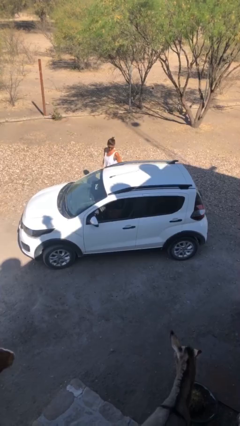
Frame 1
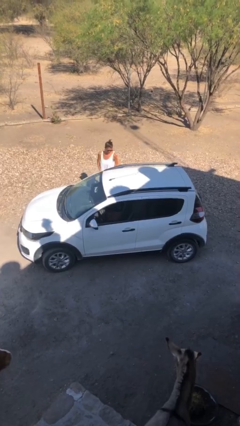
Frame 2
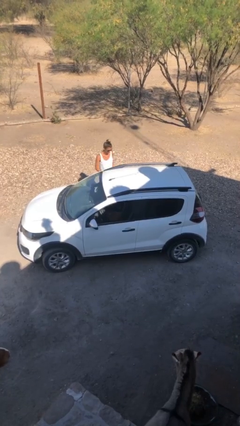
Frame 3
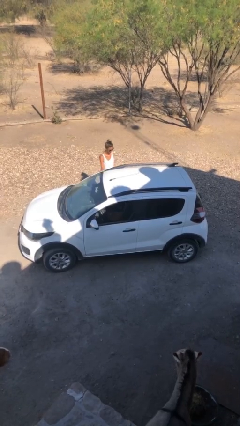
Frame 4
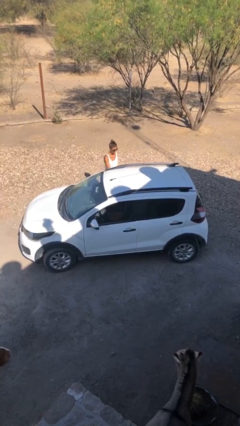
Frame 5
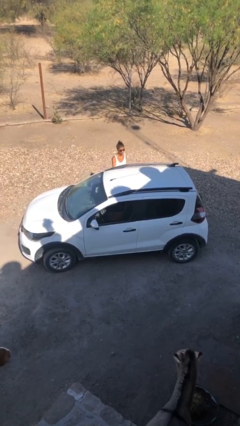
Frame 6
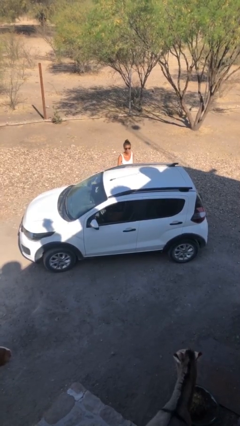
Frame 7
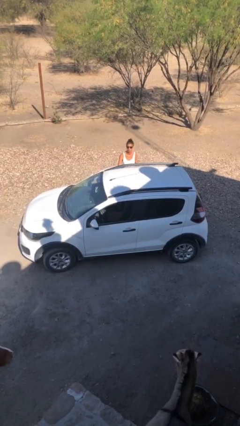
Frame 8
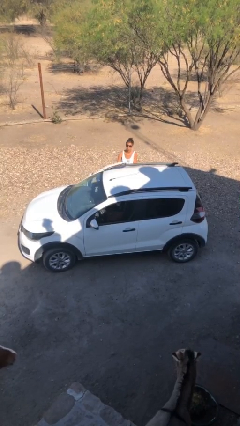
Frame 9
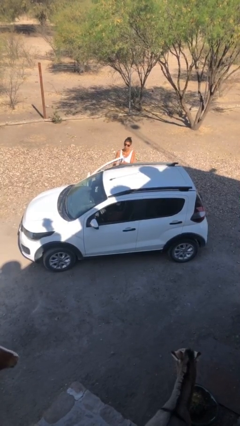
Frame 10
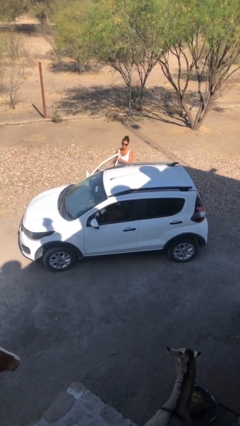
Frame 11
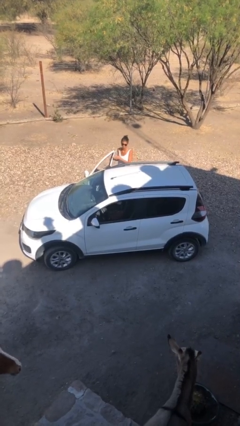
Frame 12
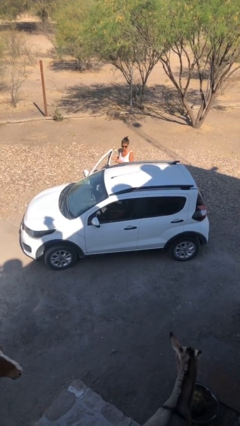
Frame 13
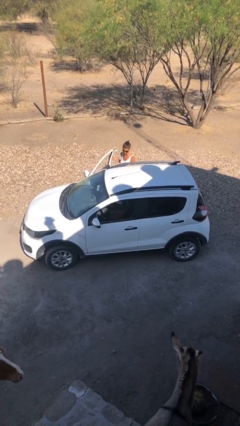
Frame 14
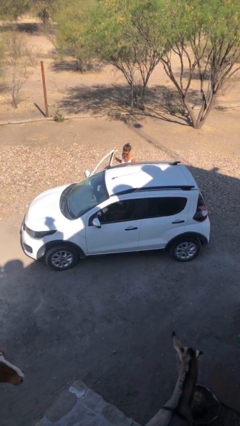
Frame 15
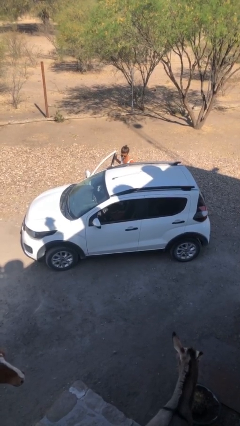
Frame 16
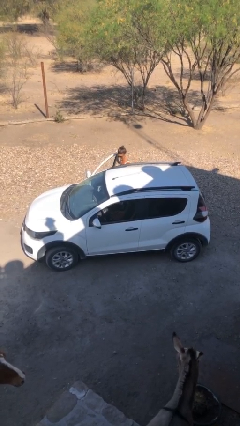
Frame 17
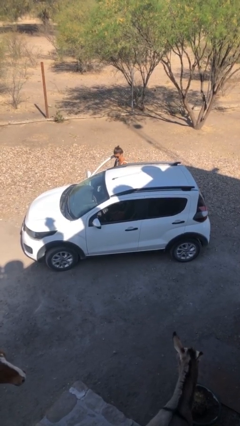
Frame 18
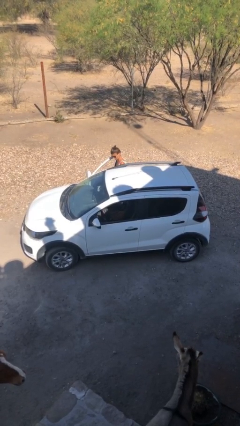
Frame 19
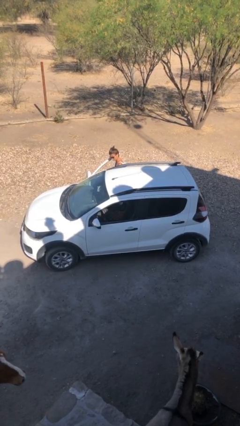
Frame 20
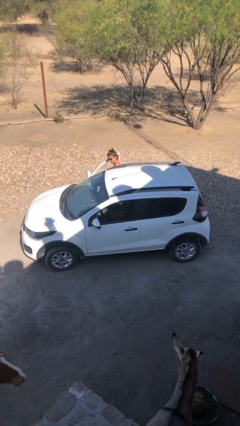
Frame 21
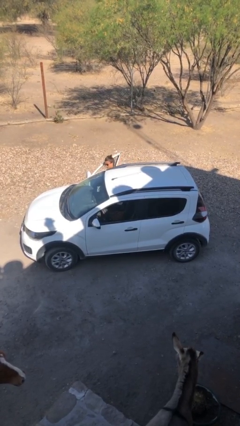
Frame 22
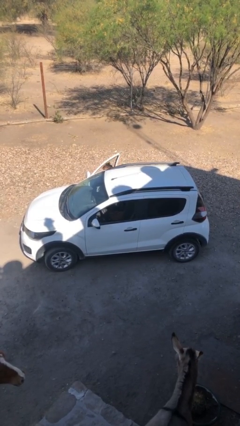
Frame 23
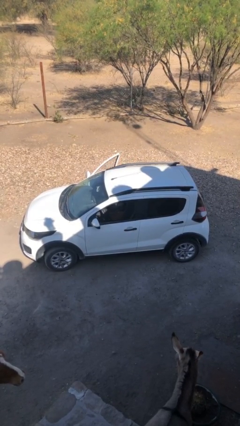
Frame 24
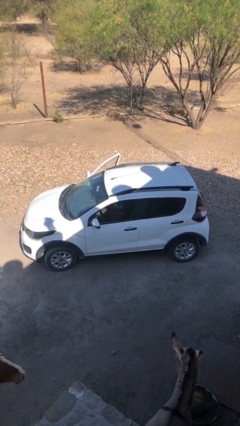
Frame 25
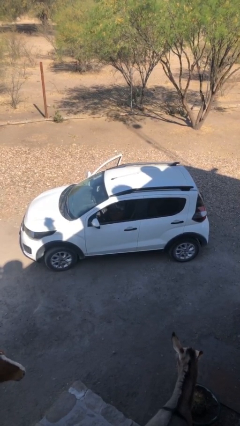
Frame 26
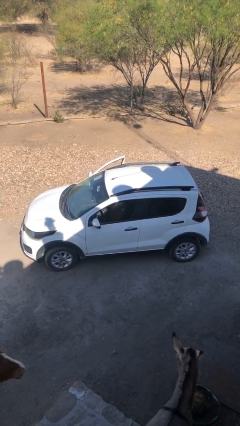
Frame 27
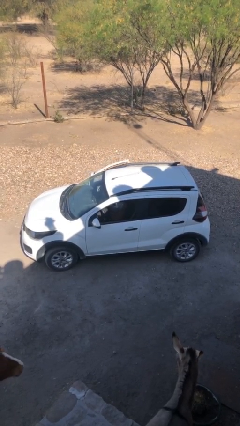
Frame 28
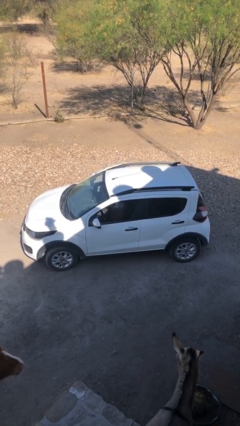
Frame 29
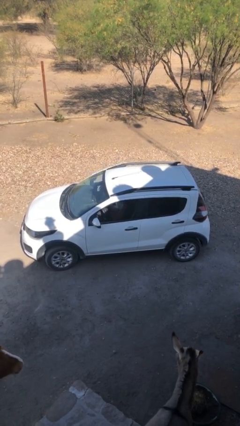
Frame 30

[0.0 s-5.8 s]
car picks up person

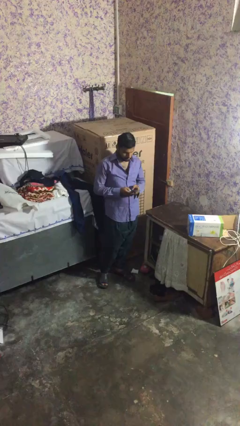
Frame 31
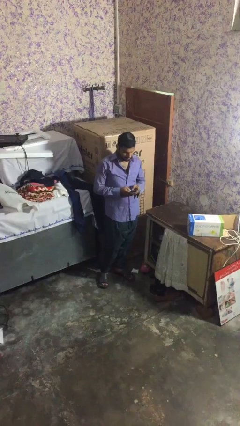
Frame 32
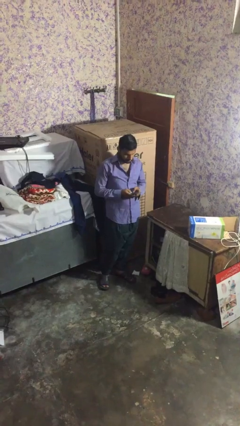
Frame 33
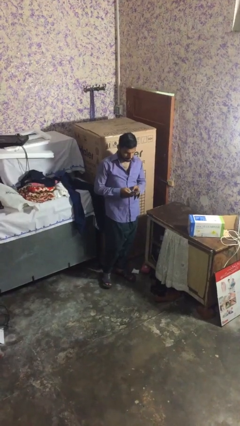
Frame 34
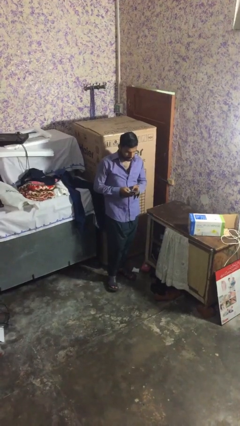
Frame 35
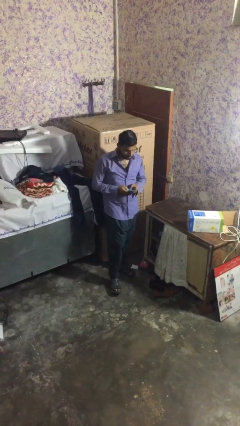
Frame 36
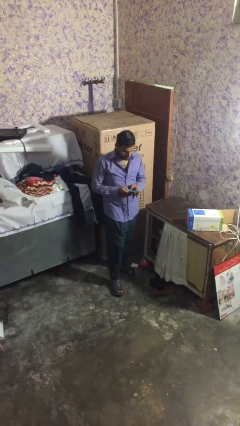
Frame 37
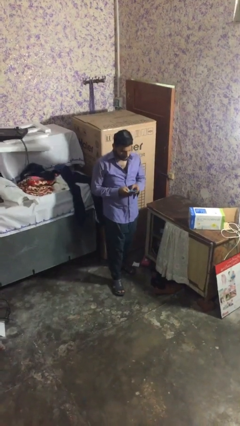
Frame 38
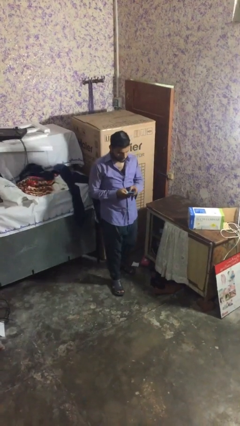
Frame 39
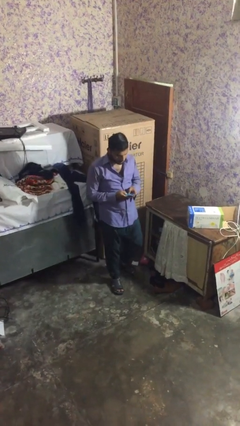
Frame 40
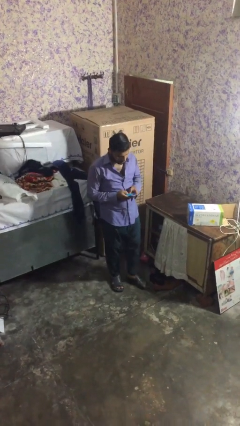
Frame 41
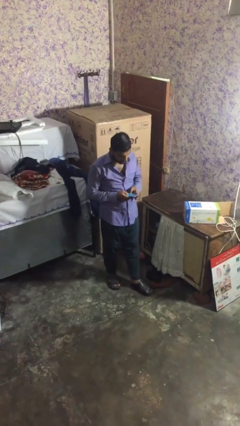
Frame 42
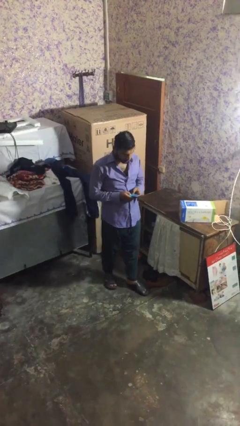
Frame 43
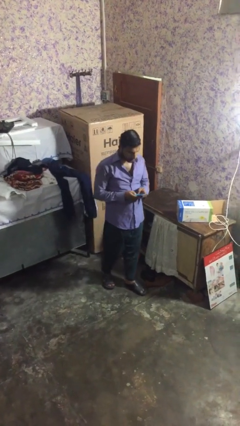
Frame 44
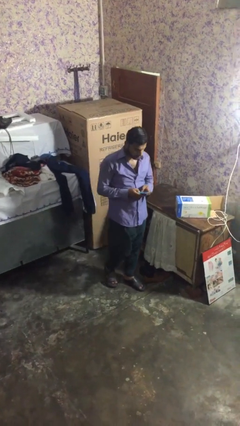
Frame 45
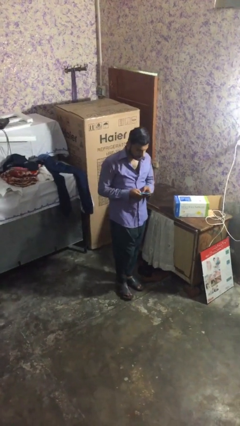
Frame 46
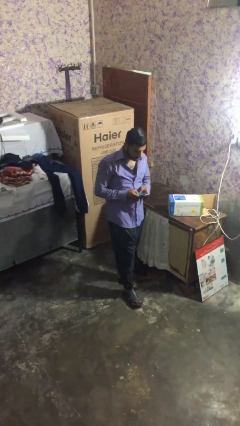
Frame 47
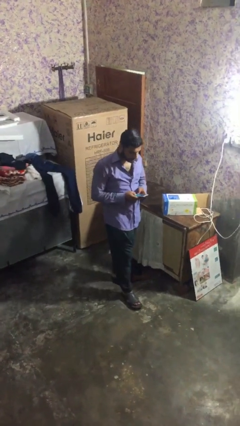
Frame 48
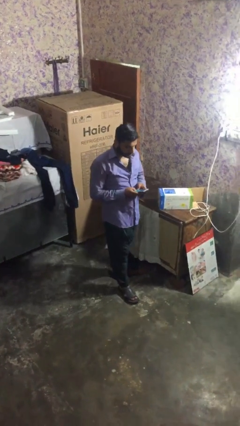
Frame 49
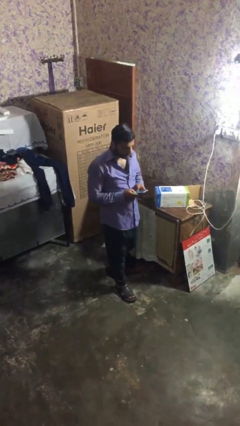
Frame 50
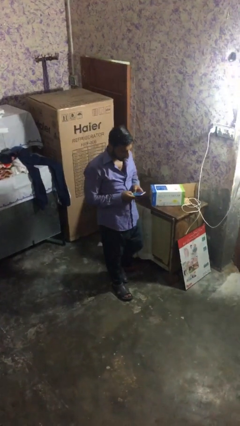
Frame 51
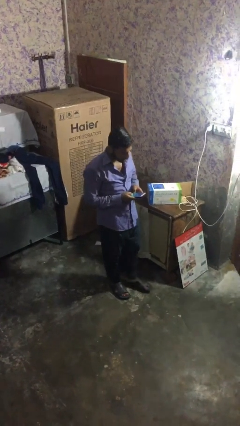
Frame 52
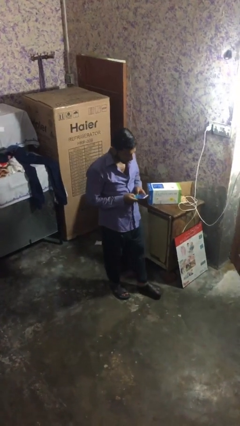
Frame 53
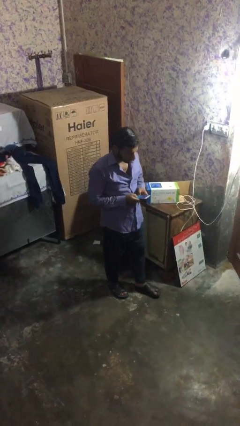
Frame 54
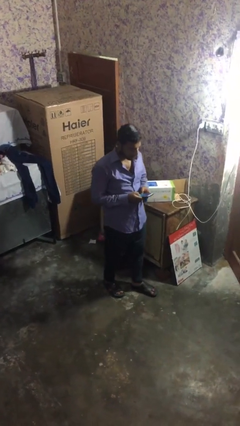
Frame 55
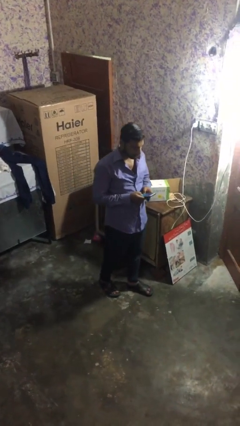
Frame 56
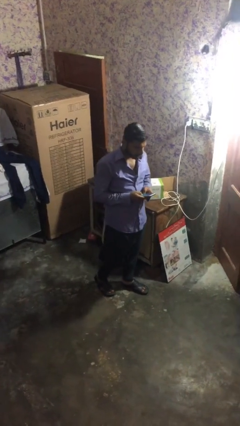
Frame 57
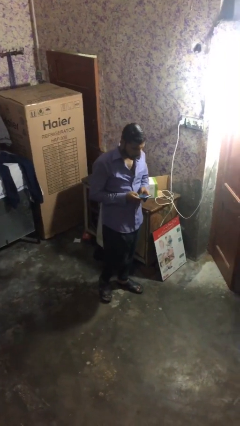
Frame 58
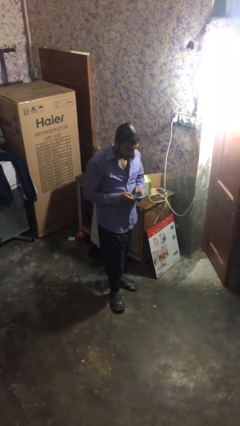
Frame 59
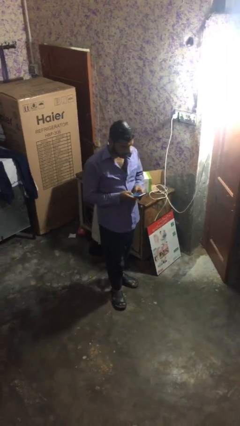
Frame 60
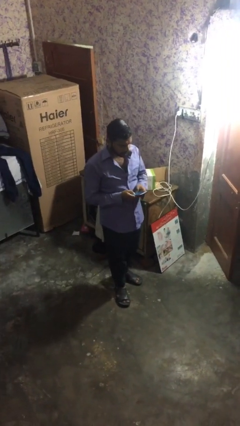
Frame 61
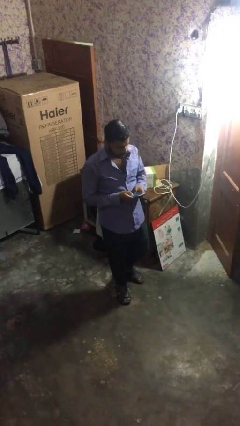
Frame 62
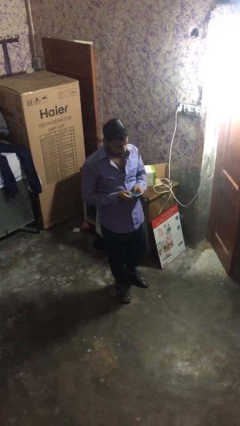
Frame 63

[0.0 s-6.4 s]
person texts on phone

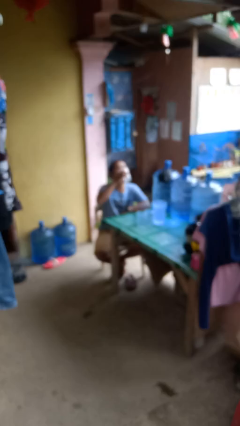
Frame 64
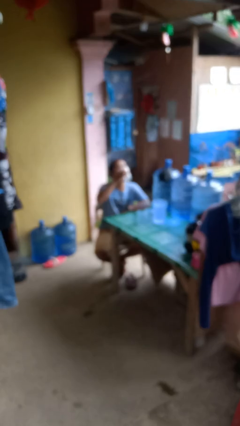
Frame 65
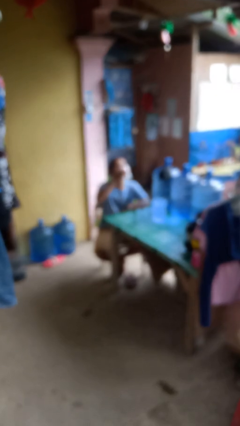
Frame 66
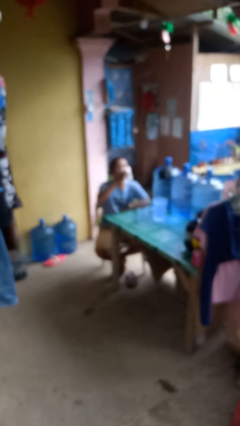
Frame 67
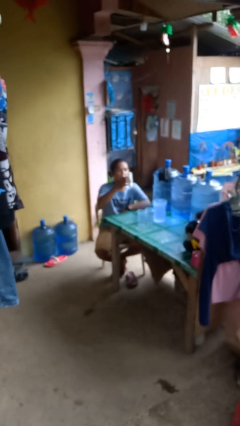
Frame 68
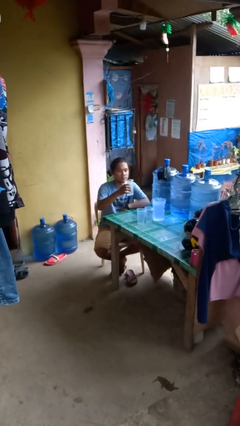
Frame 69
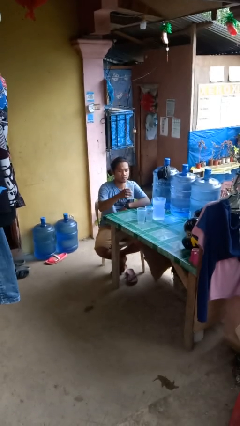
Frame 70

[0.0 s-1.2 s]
person drinks from shotglass

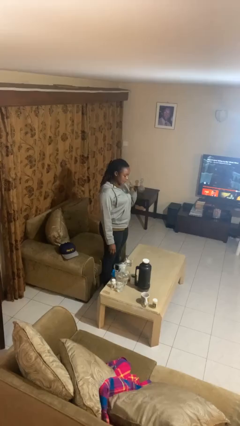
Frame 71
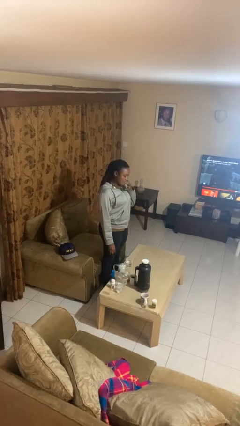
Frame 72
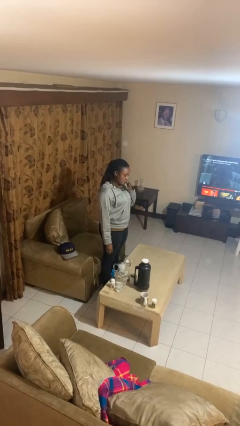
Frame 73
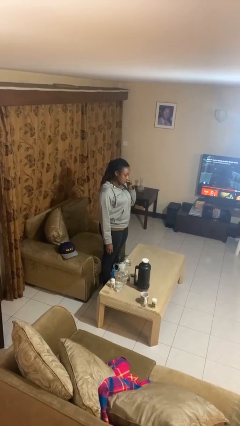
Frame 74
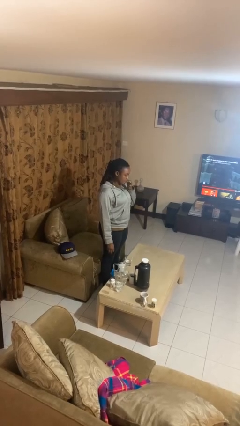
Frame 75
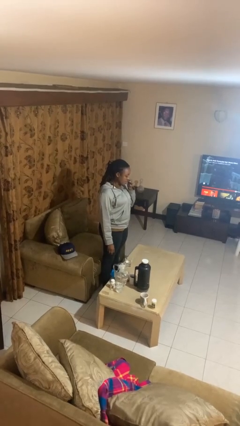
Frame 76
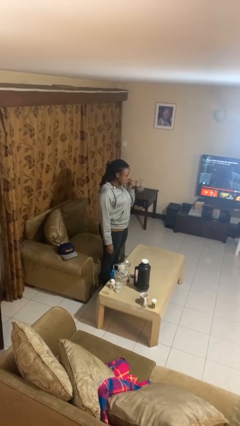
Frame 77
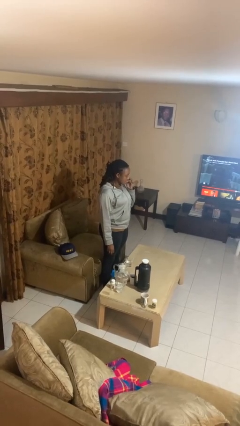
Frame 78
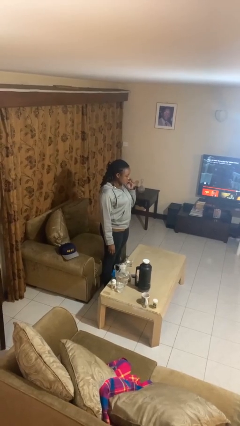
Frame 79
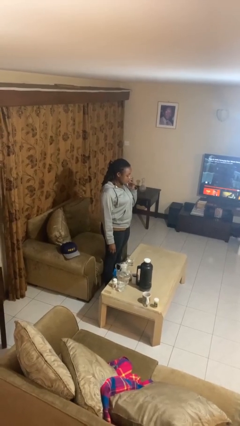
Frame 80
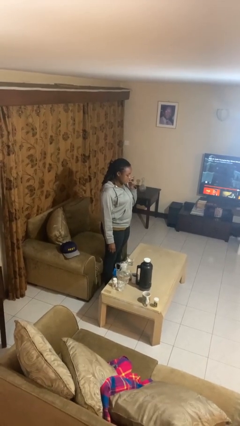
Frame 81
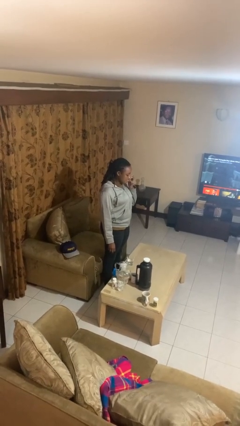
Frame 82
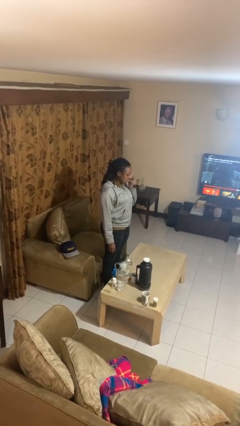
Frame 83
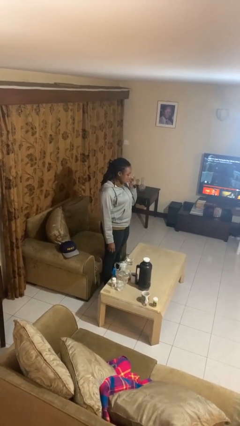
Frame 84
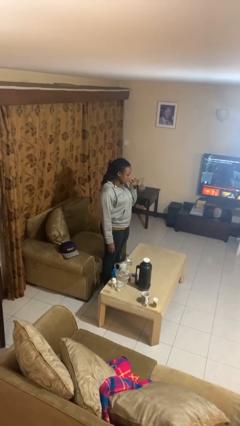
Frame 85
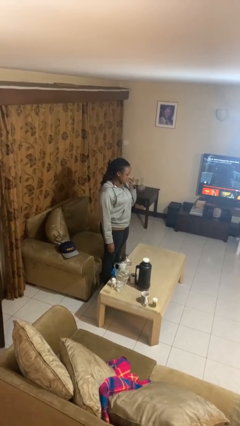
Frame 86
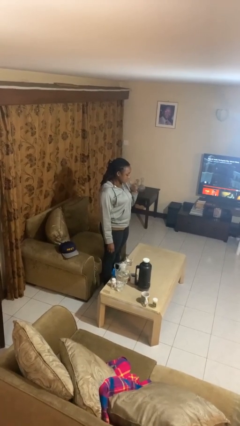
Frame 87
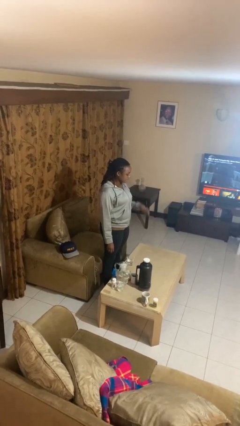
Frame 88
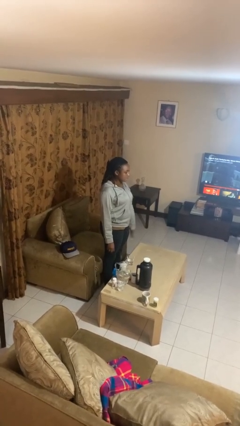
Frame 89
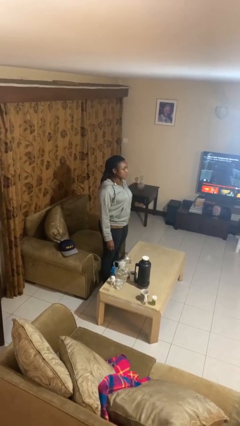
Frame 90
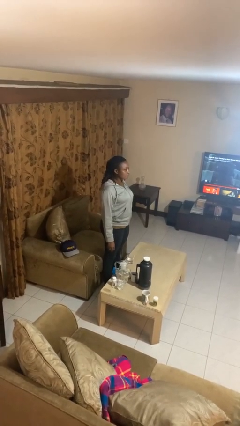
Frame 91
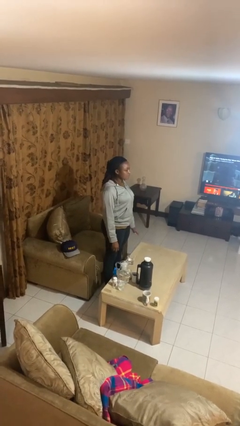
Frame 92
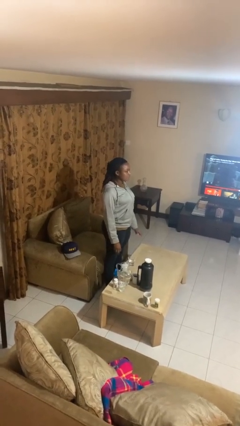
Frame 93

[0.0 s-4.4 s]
person licks fingers

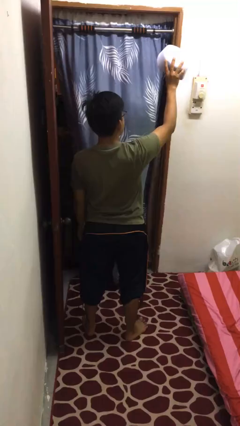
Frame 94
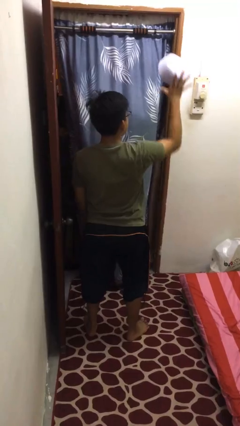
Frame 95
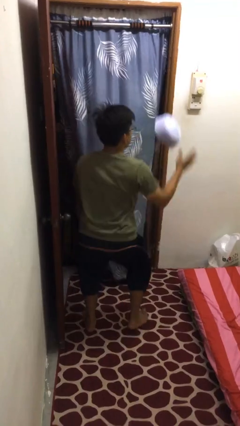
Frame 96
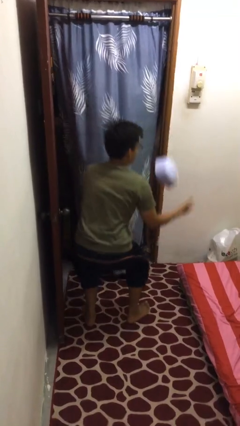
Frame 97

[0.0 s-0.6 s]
person drops object
